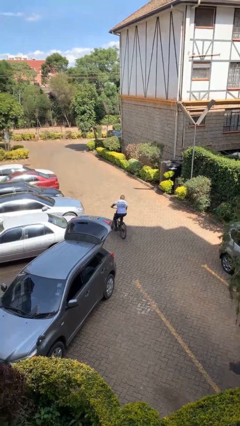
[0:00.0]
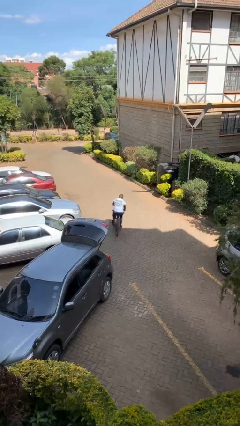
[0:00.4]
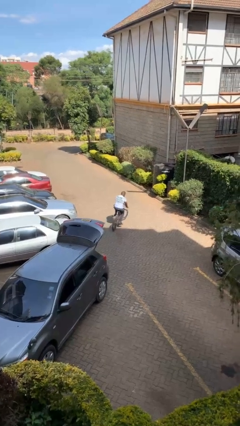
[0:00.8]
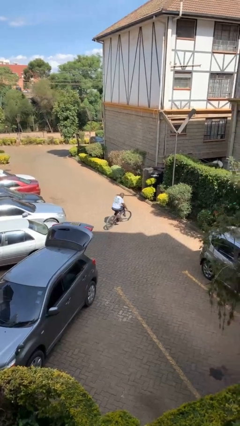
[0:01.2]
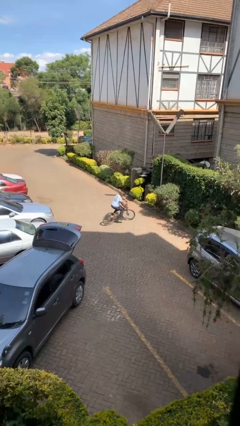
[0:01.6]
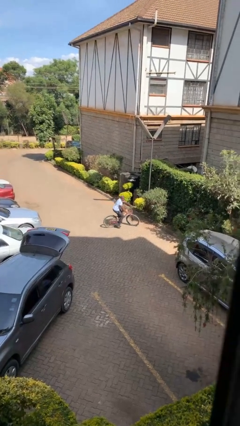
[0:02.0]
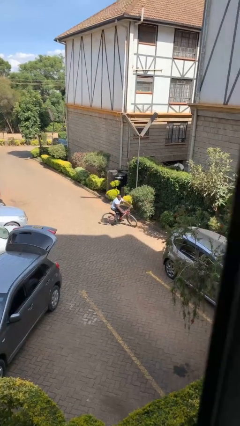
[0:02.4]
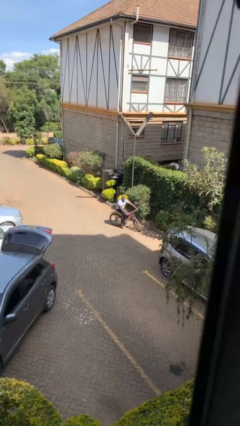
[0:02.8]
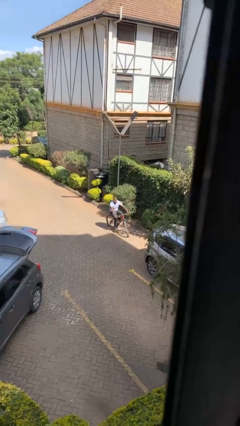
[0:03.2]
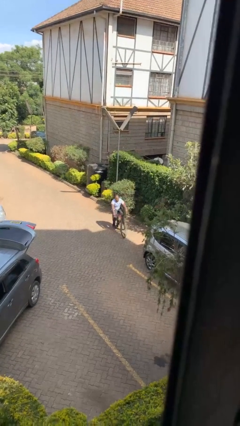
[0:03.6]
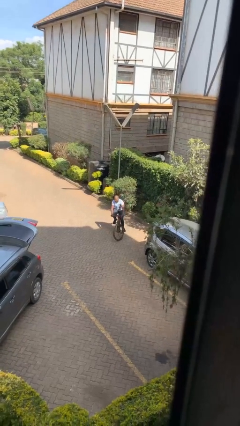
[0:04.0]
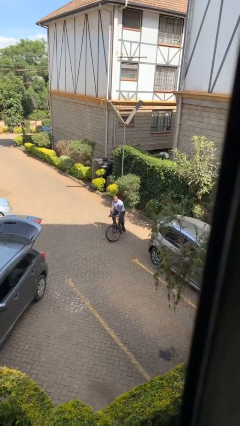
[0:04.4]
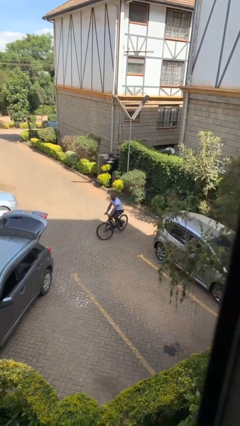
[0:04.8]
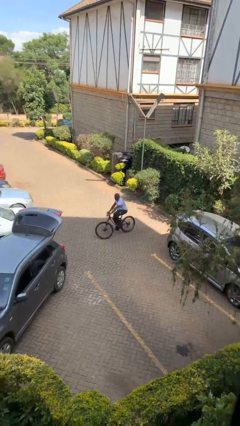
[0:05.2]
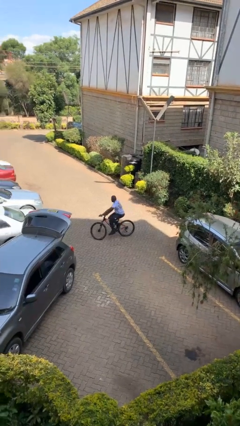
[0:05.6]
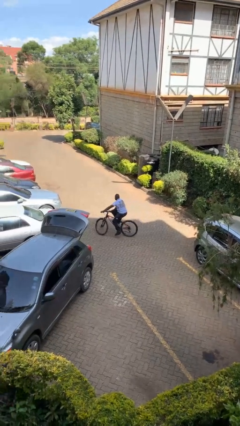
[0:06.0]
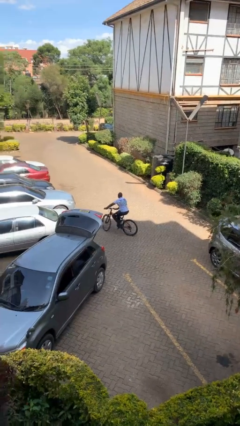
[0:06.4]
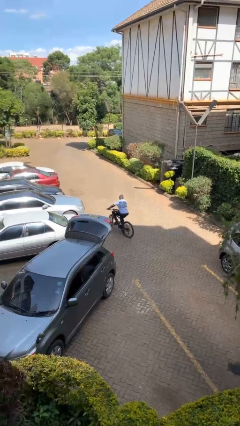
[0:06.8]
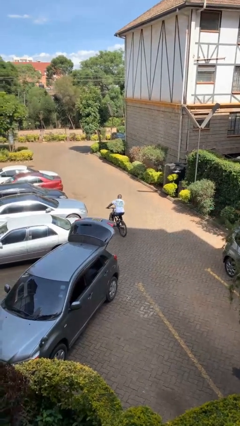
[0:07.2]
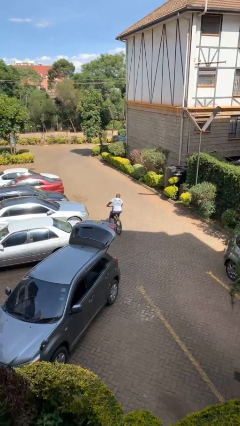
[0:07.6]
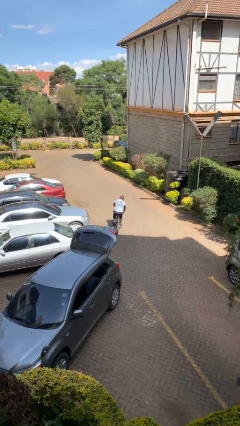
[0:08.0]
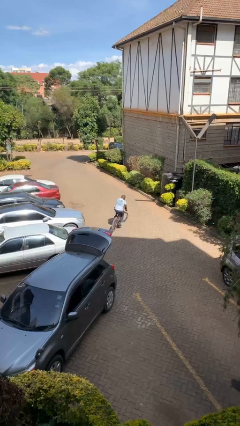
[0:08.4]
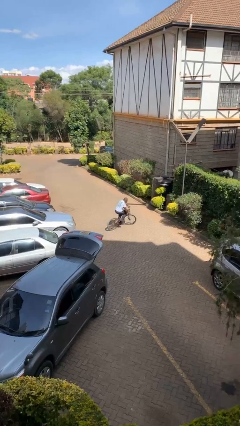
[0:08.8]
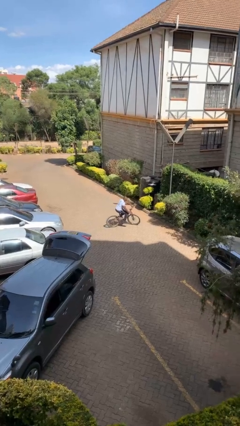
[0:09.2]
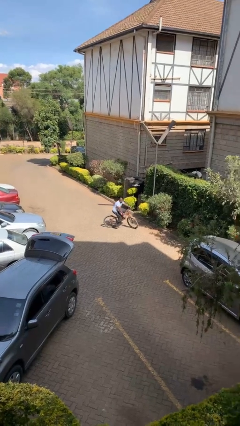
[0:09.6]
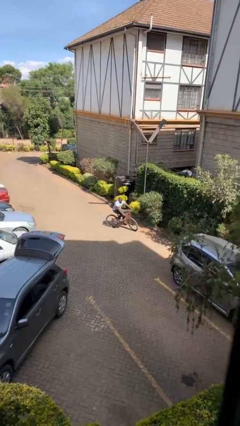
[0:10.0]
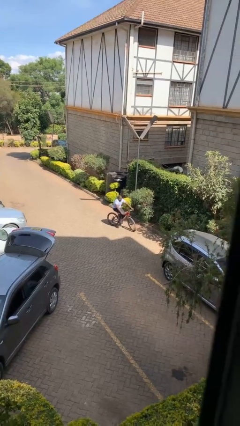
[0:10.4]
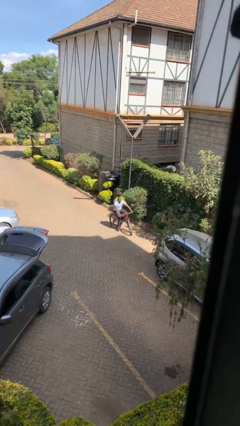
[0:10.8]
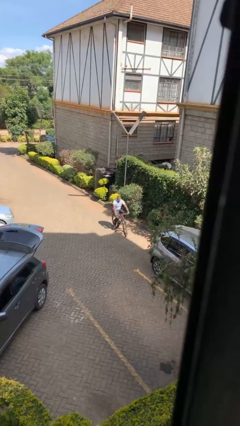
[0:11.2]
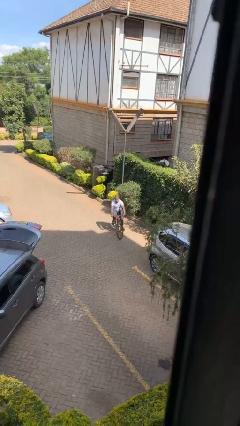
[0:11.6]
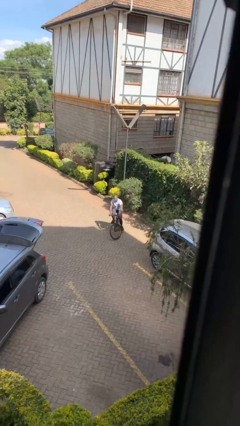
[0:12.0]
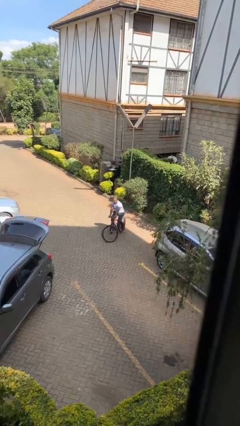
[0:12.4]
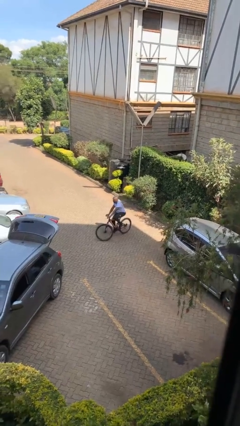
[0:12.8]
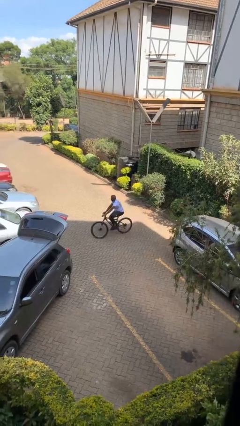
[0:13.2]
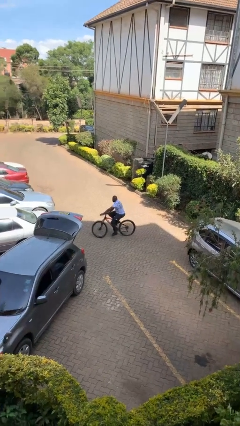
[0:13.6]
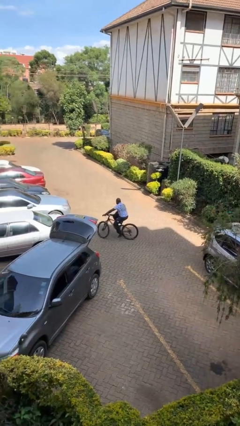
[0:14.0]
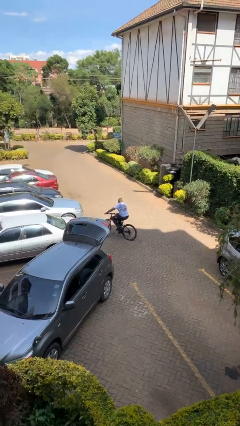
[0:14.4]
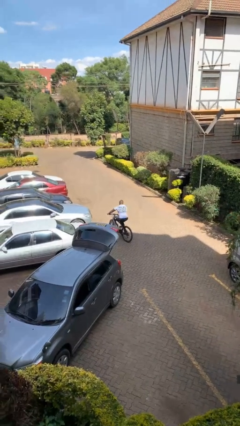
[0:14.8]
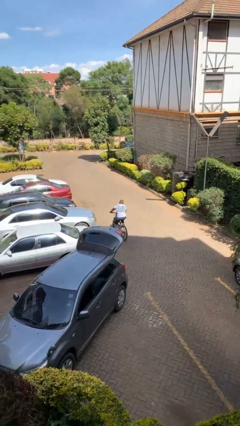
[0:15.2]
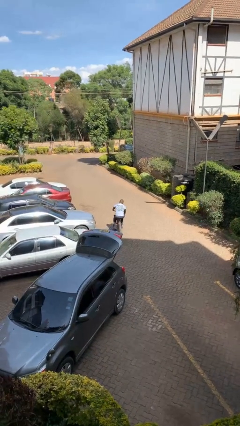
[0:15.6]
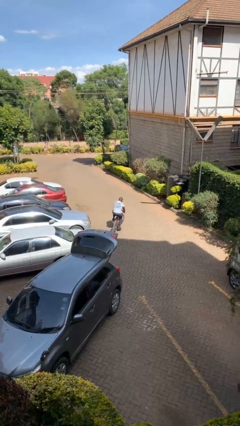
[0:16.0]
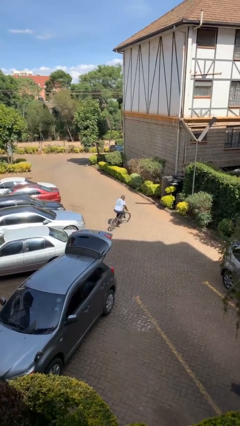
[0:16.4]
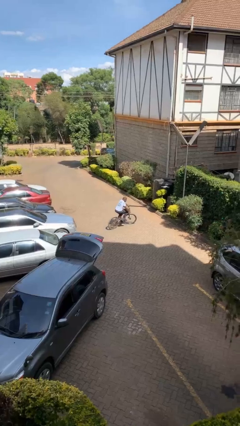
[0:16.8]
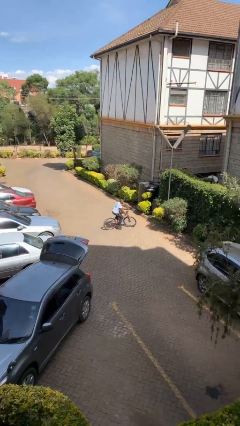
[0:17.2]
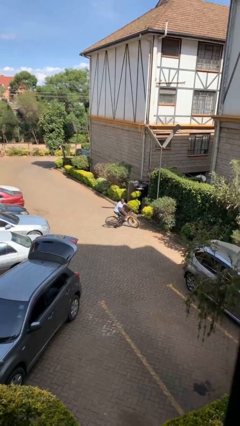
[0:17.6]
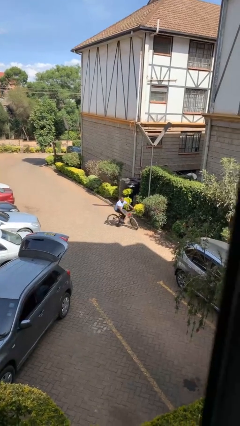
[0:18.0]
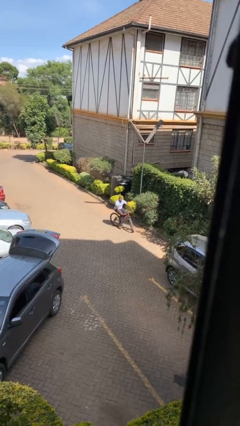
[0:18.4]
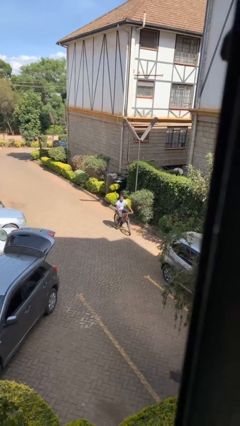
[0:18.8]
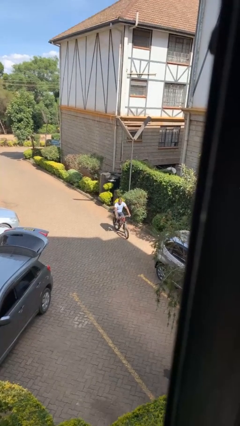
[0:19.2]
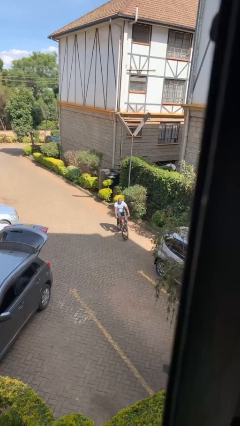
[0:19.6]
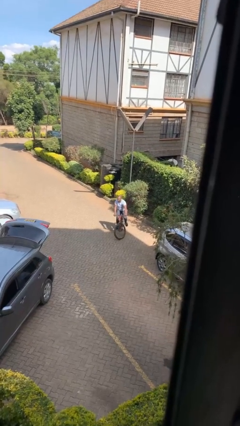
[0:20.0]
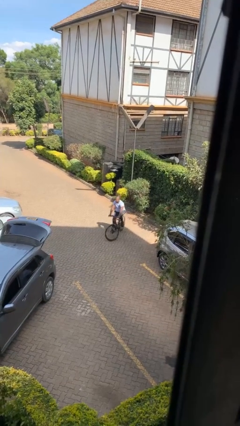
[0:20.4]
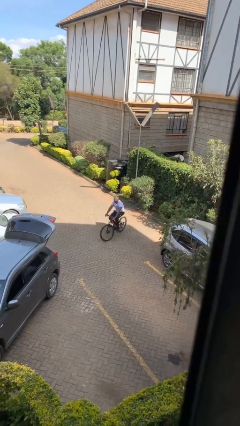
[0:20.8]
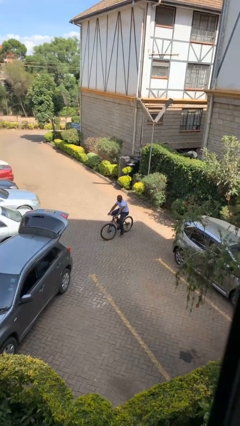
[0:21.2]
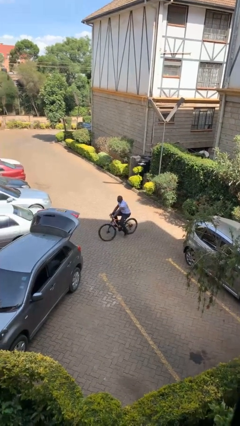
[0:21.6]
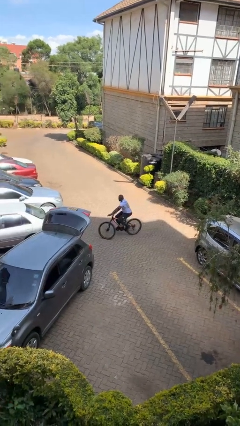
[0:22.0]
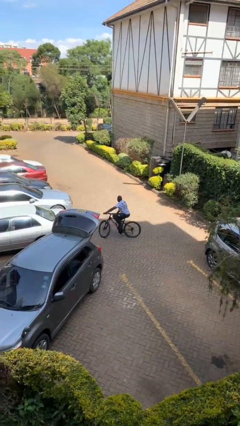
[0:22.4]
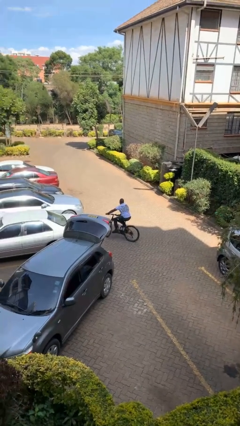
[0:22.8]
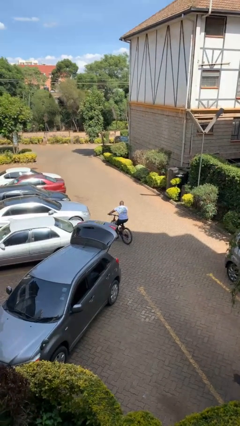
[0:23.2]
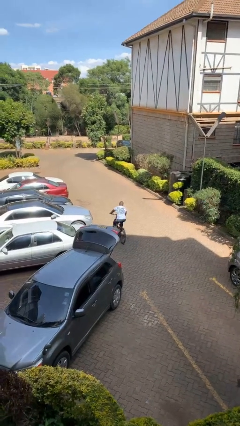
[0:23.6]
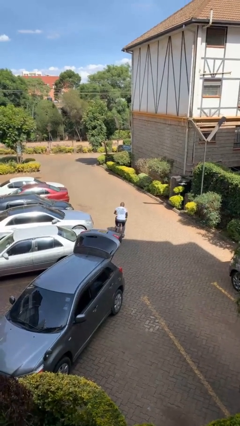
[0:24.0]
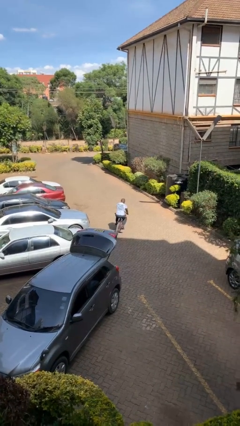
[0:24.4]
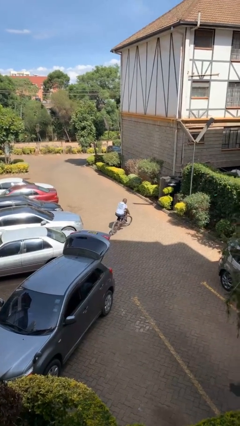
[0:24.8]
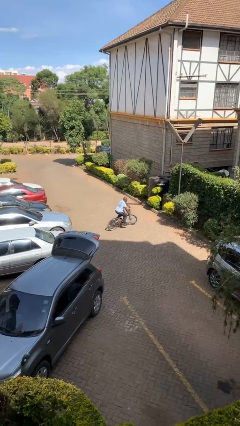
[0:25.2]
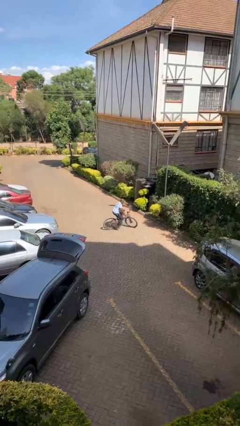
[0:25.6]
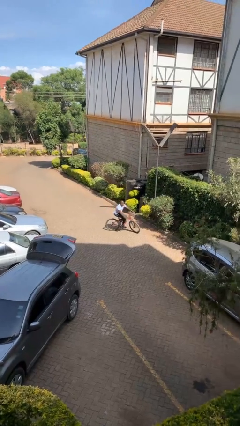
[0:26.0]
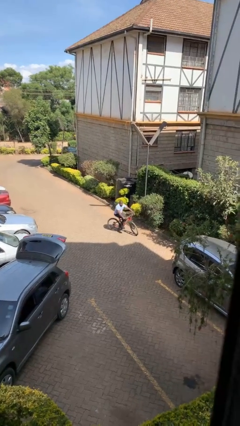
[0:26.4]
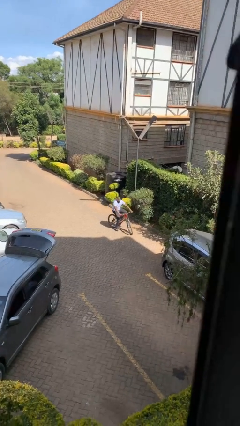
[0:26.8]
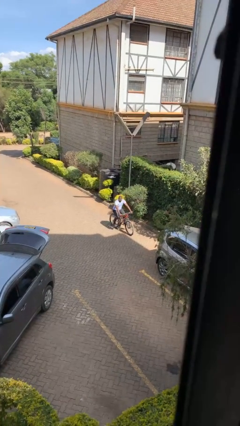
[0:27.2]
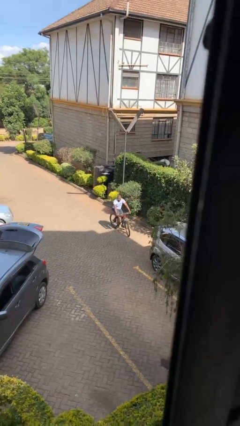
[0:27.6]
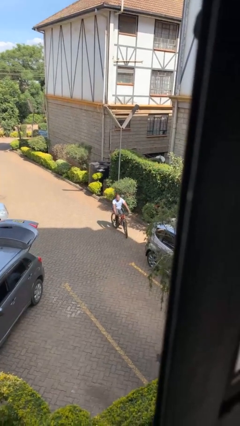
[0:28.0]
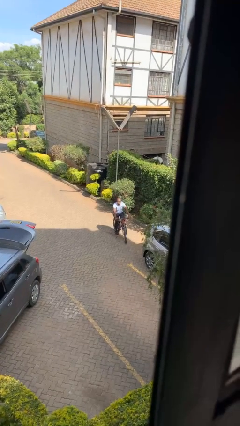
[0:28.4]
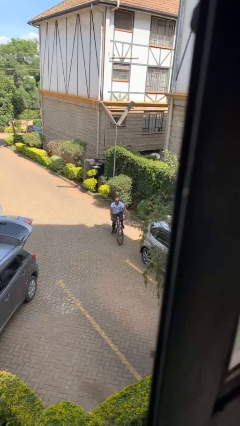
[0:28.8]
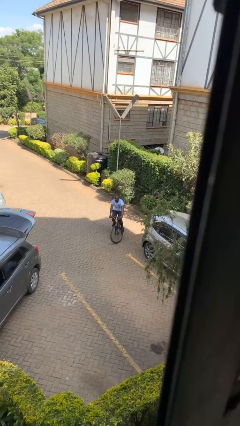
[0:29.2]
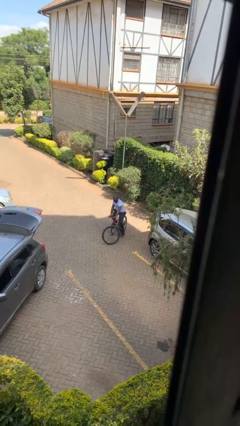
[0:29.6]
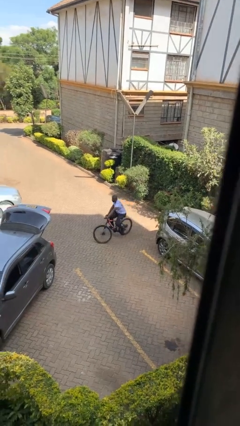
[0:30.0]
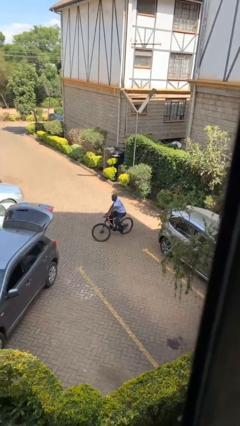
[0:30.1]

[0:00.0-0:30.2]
person rides bicycle

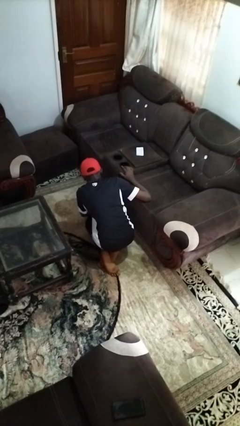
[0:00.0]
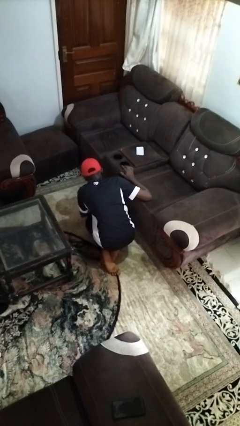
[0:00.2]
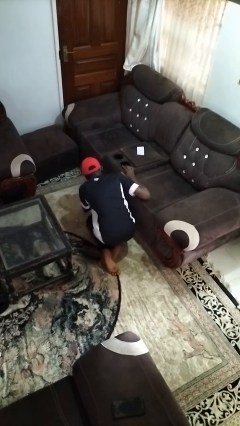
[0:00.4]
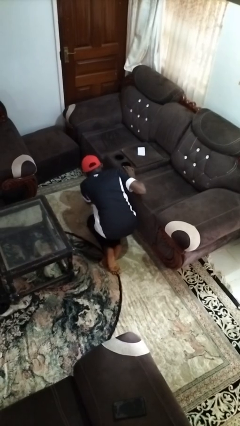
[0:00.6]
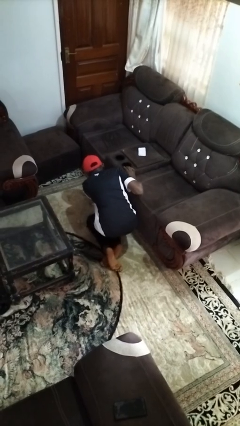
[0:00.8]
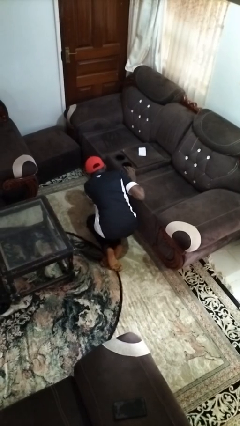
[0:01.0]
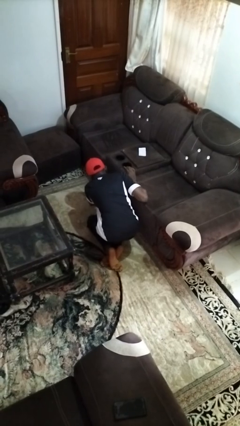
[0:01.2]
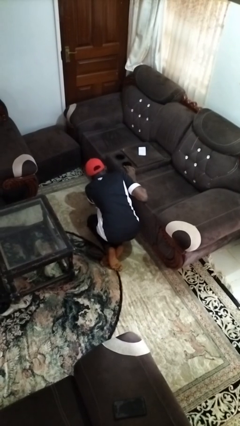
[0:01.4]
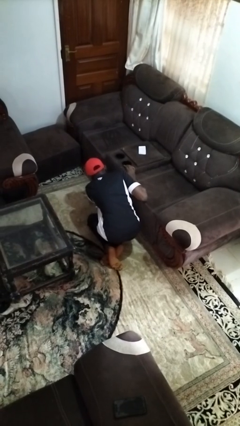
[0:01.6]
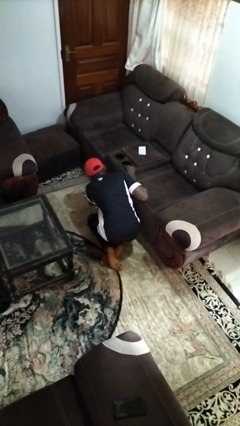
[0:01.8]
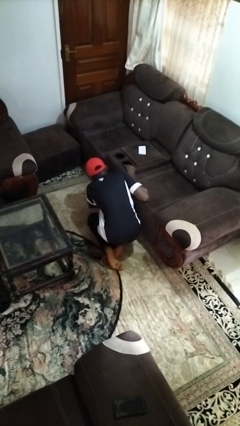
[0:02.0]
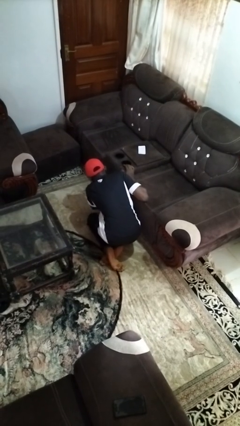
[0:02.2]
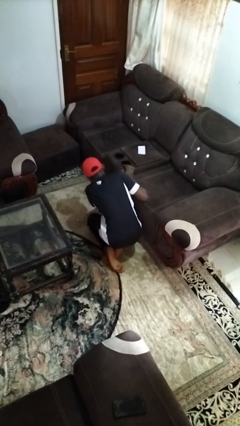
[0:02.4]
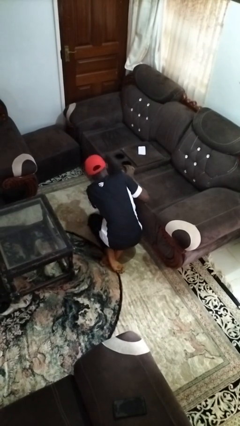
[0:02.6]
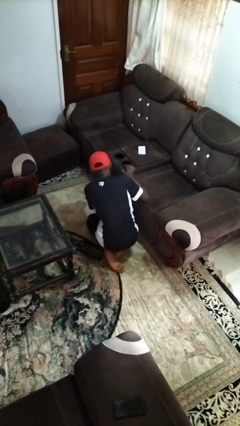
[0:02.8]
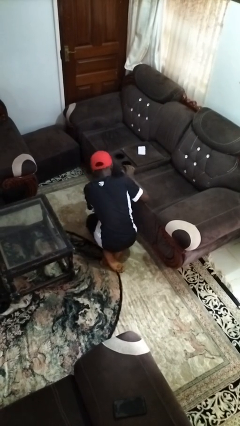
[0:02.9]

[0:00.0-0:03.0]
person searches under couch
